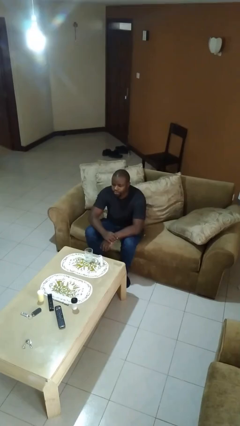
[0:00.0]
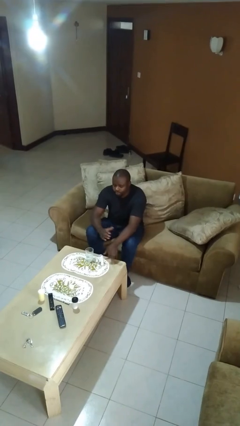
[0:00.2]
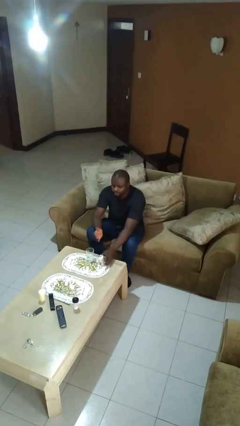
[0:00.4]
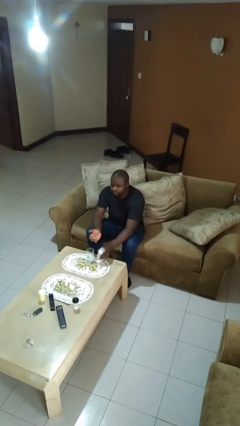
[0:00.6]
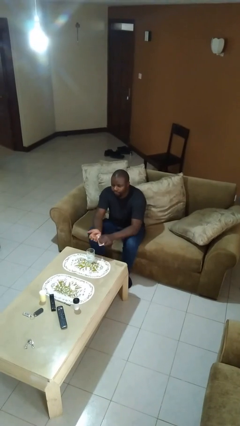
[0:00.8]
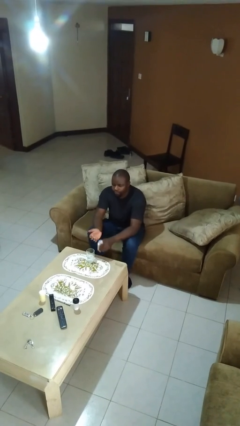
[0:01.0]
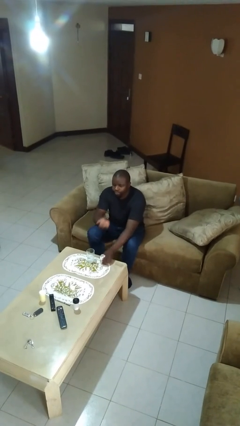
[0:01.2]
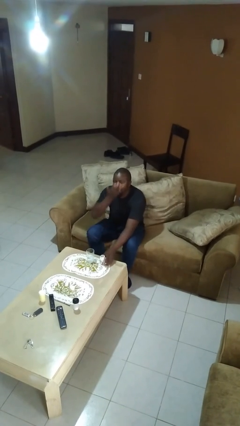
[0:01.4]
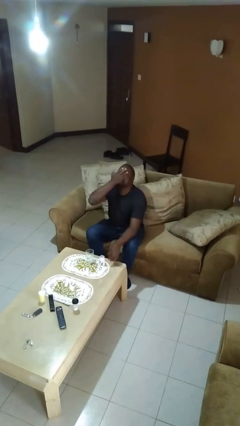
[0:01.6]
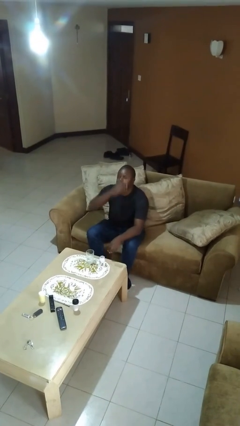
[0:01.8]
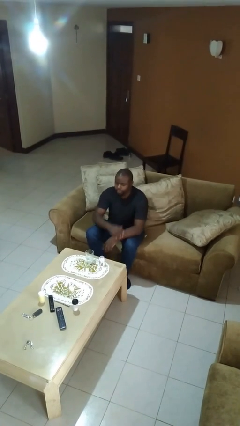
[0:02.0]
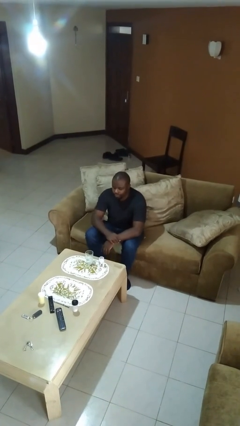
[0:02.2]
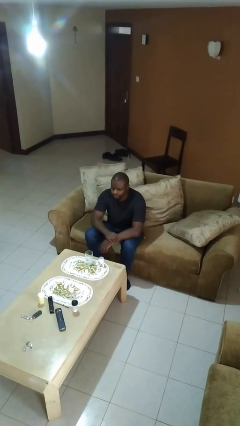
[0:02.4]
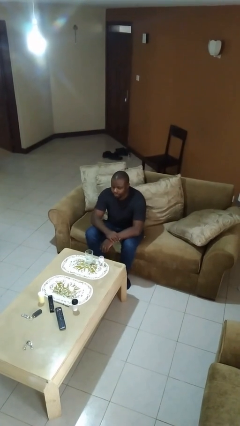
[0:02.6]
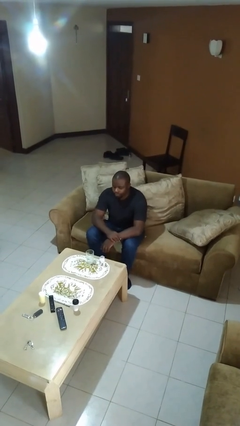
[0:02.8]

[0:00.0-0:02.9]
person takes medicine pills

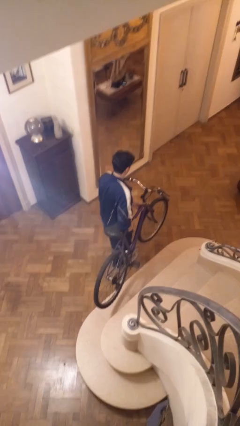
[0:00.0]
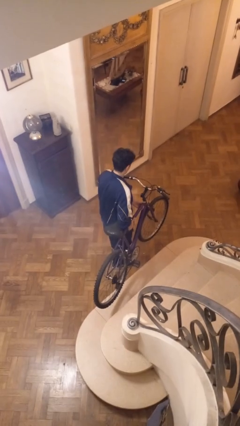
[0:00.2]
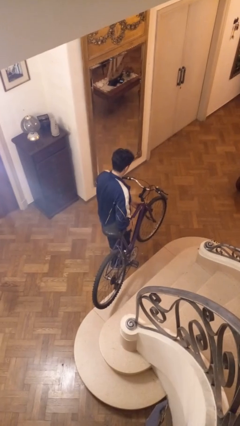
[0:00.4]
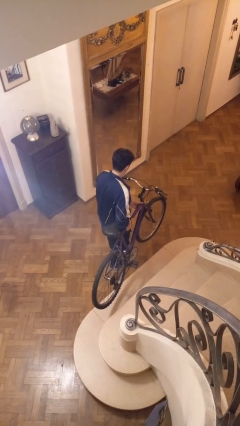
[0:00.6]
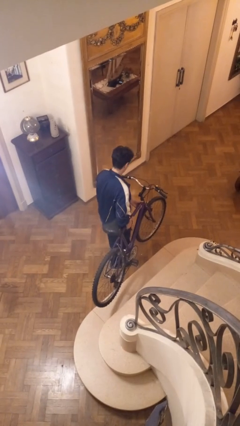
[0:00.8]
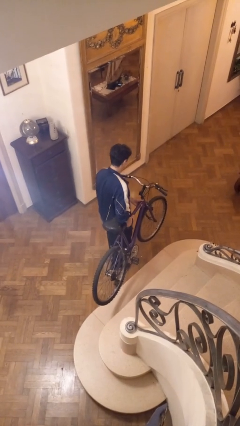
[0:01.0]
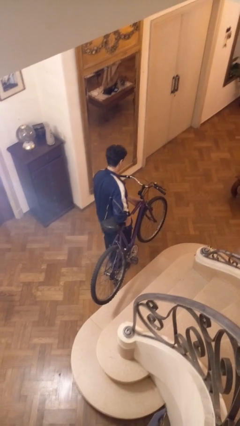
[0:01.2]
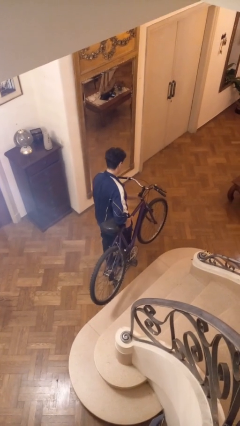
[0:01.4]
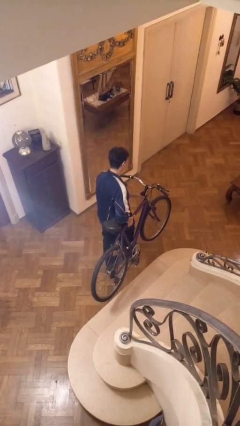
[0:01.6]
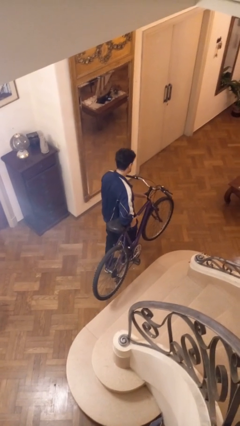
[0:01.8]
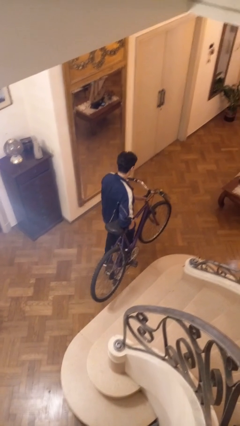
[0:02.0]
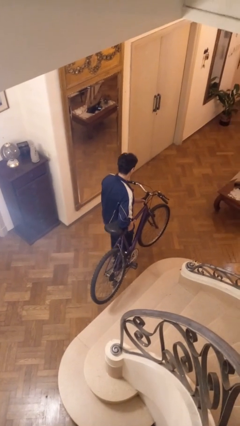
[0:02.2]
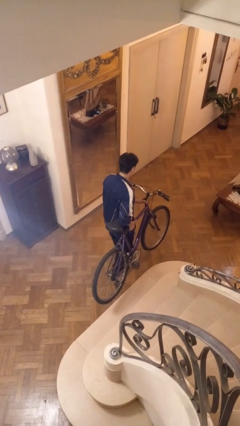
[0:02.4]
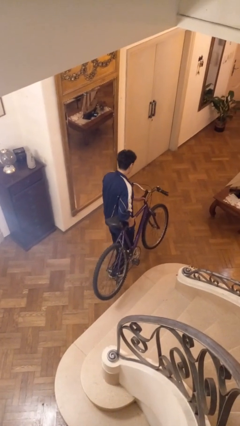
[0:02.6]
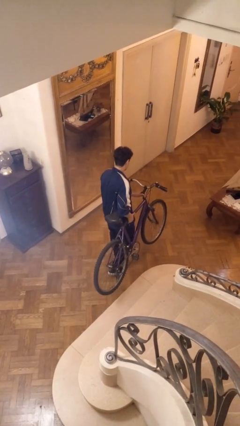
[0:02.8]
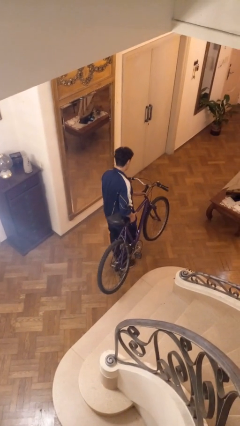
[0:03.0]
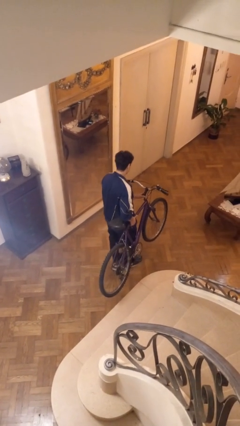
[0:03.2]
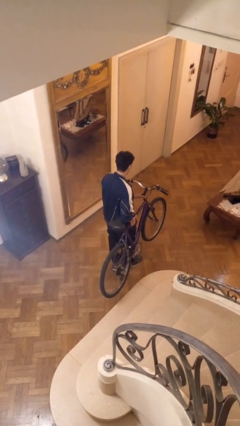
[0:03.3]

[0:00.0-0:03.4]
person carries bicycle

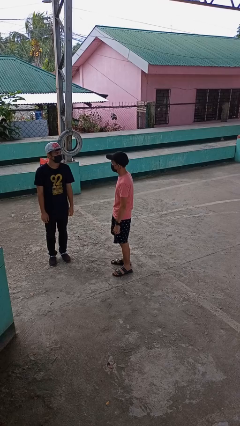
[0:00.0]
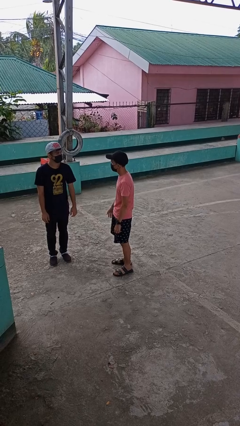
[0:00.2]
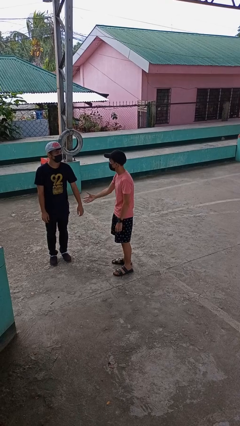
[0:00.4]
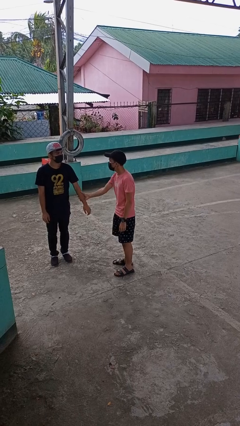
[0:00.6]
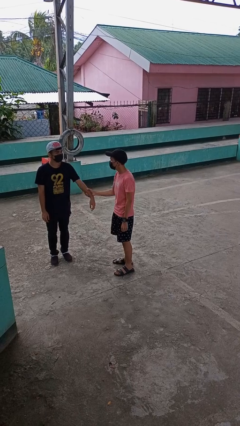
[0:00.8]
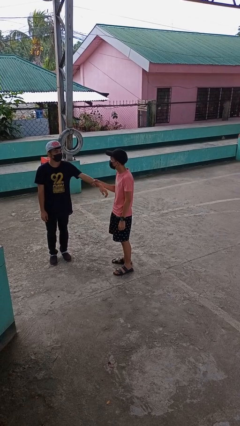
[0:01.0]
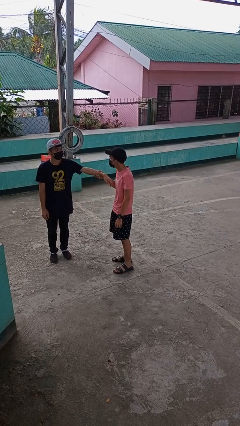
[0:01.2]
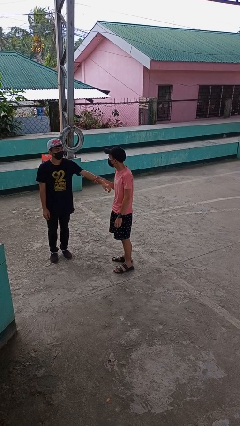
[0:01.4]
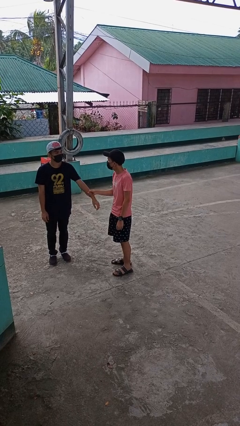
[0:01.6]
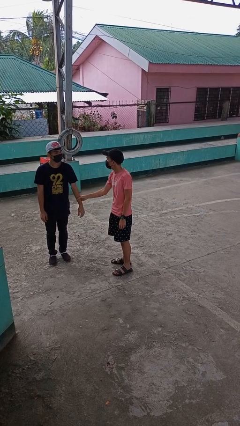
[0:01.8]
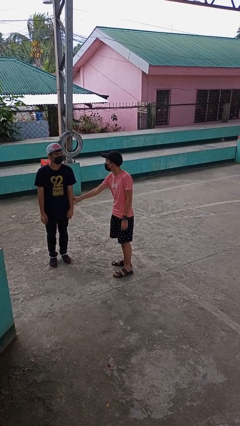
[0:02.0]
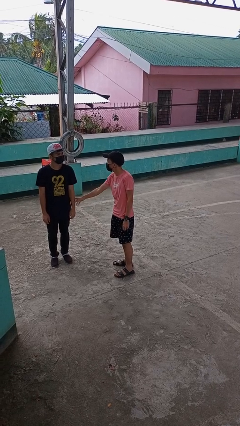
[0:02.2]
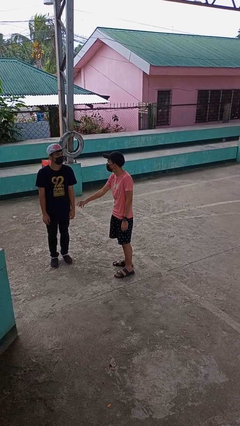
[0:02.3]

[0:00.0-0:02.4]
person grabs person by forearm

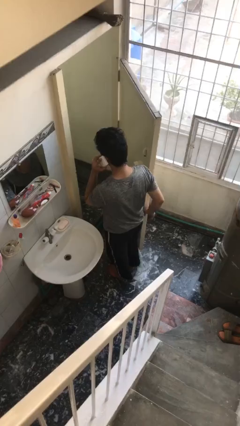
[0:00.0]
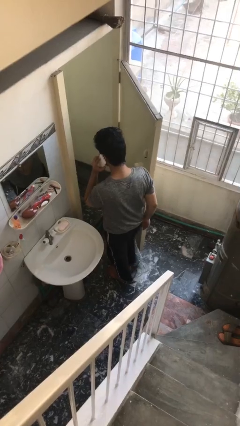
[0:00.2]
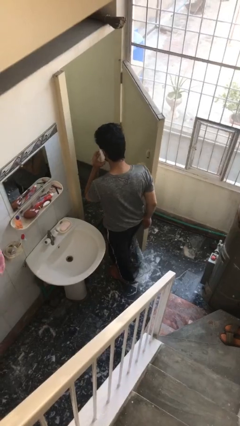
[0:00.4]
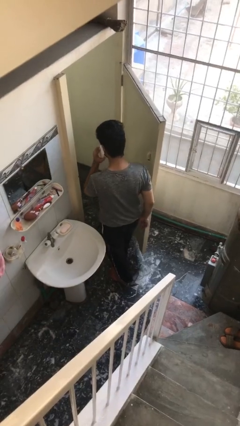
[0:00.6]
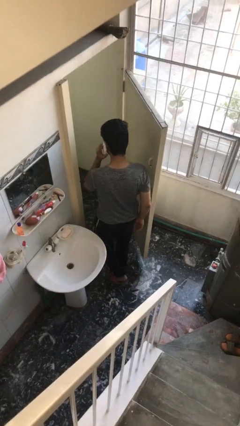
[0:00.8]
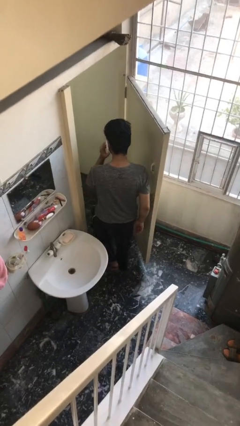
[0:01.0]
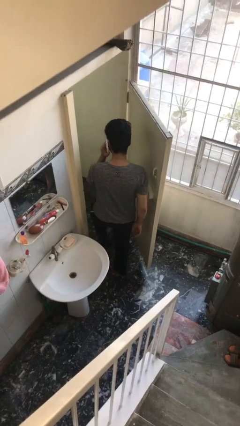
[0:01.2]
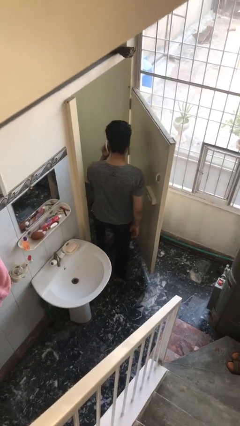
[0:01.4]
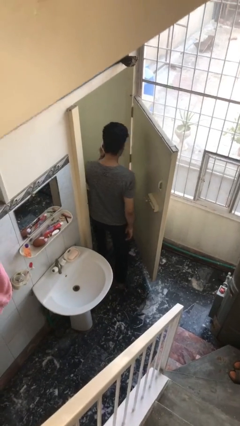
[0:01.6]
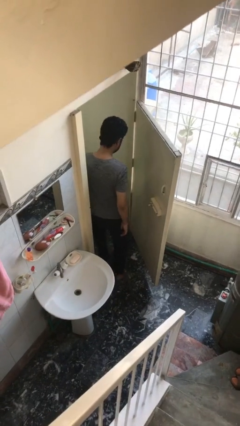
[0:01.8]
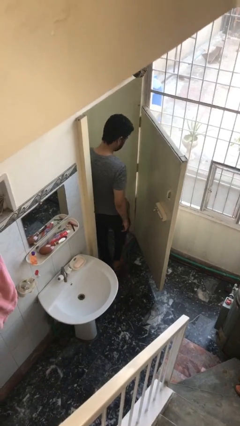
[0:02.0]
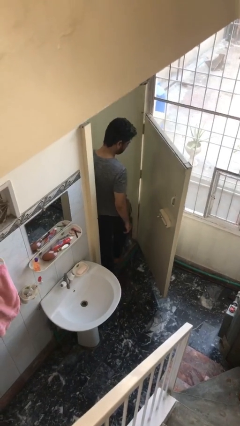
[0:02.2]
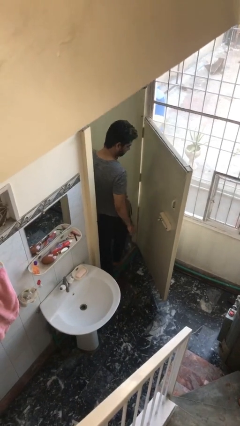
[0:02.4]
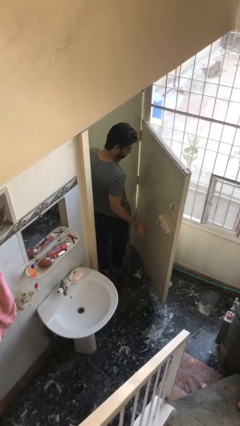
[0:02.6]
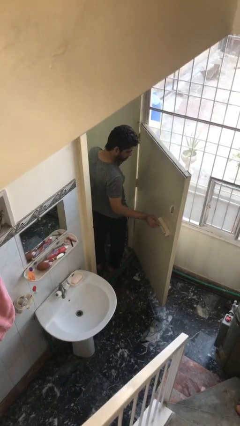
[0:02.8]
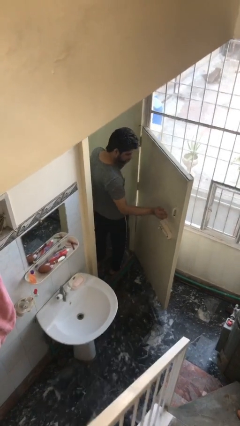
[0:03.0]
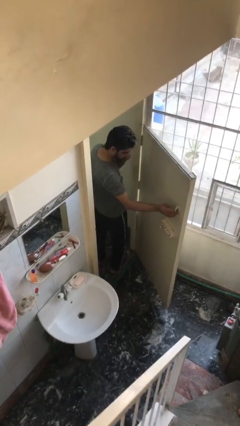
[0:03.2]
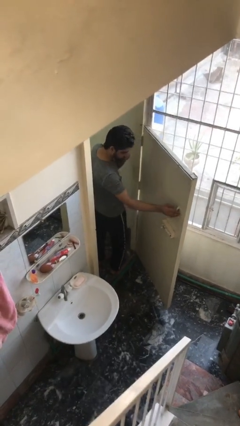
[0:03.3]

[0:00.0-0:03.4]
person exits scene through structure

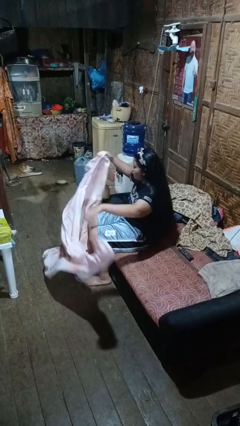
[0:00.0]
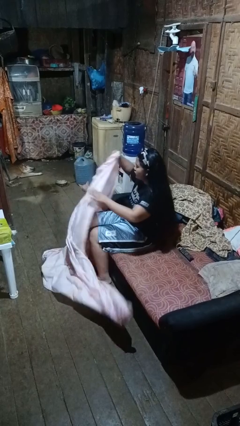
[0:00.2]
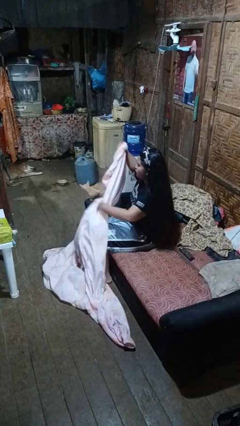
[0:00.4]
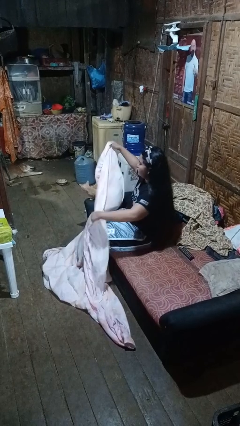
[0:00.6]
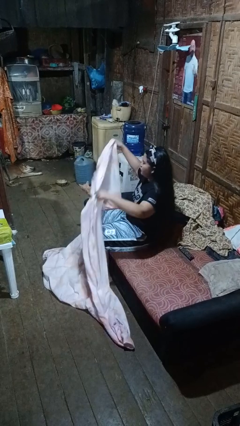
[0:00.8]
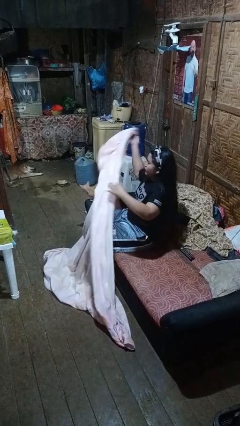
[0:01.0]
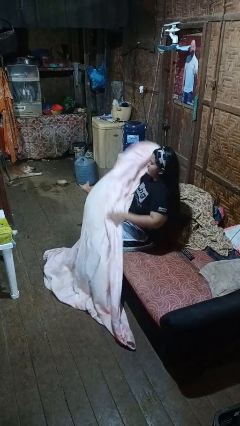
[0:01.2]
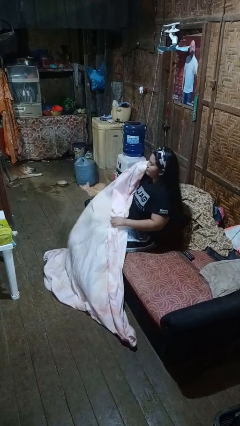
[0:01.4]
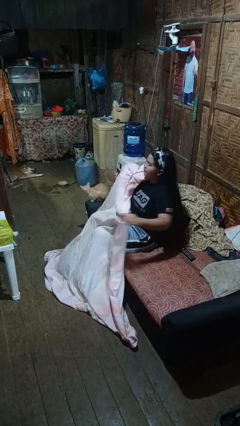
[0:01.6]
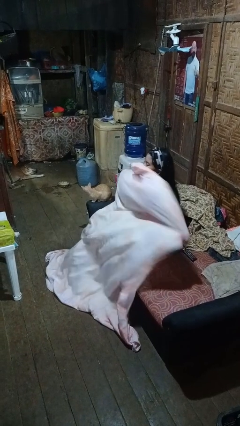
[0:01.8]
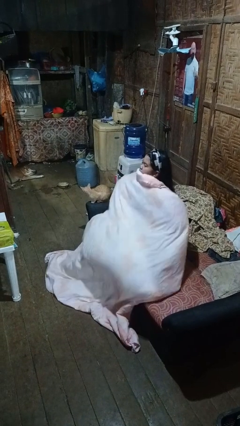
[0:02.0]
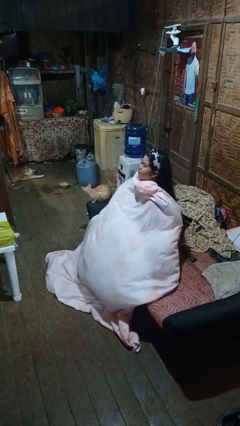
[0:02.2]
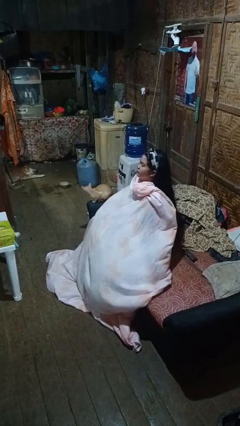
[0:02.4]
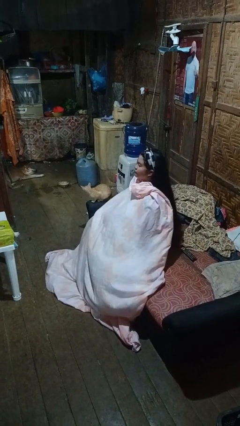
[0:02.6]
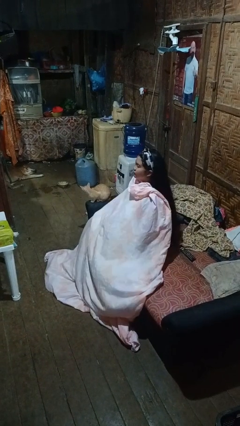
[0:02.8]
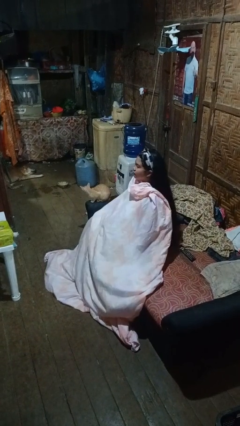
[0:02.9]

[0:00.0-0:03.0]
person covers with blanket

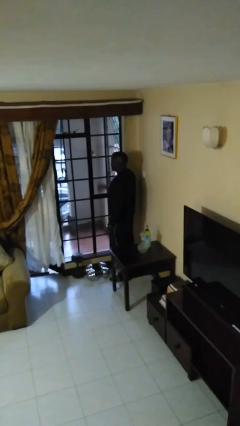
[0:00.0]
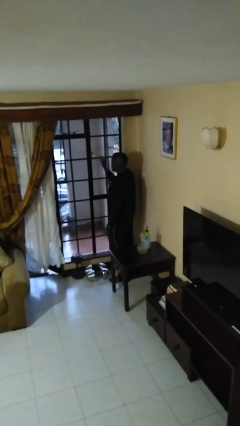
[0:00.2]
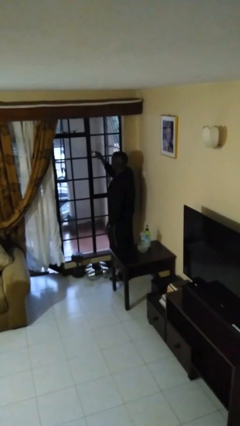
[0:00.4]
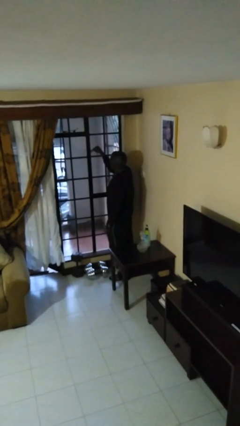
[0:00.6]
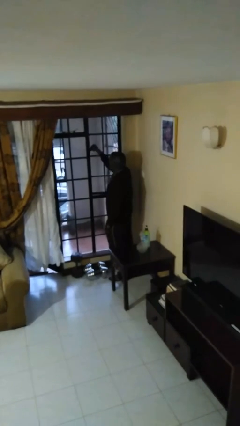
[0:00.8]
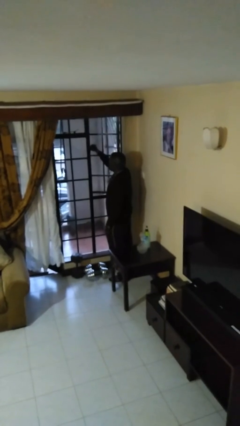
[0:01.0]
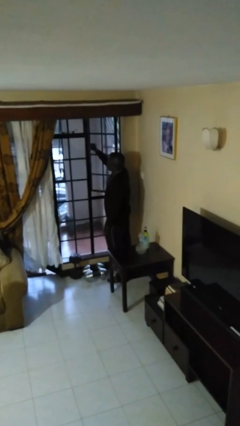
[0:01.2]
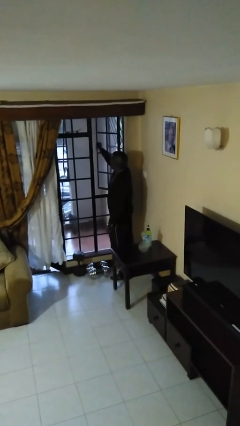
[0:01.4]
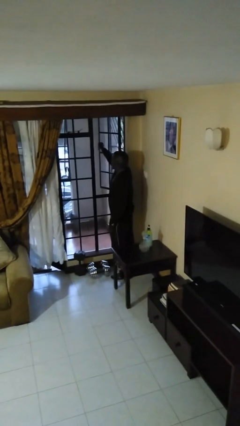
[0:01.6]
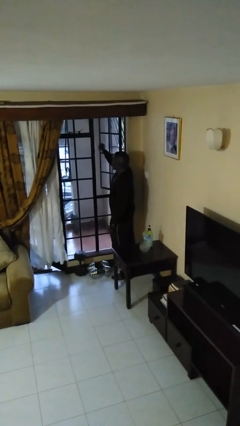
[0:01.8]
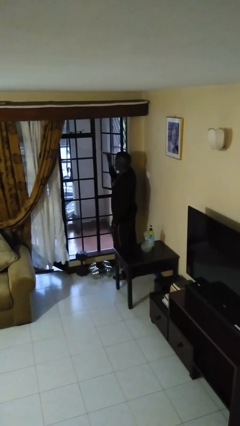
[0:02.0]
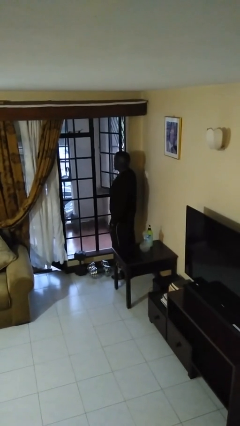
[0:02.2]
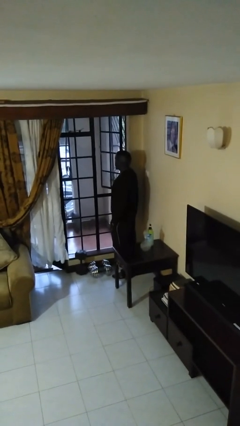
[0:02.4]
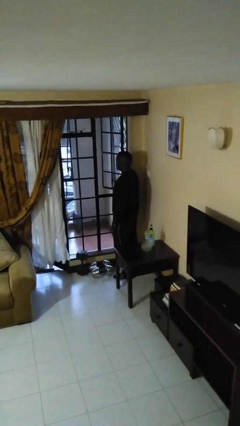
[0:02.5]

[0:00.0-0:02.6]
person opens home window
